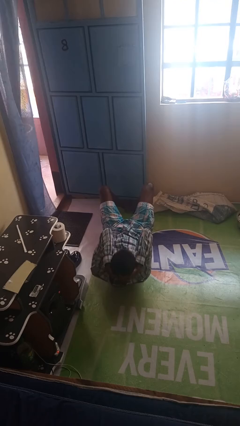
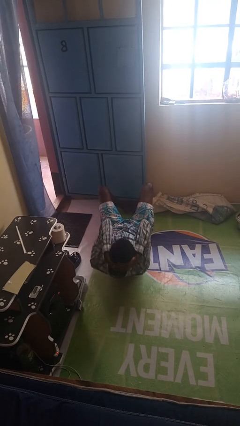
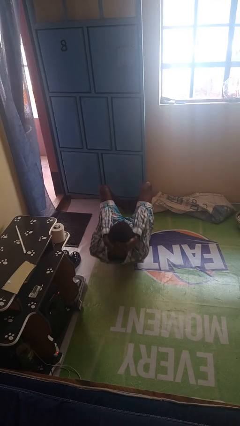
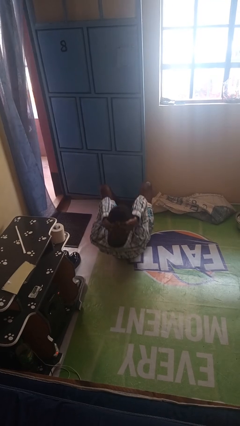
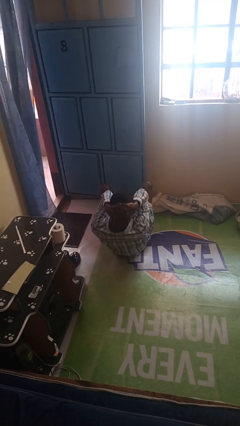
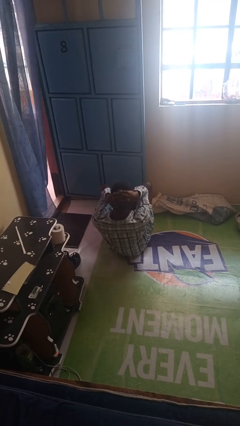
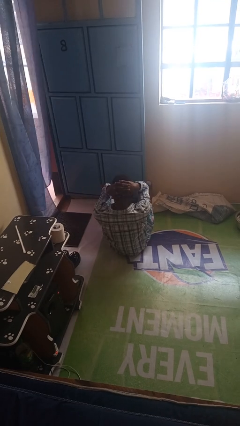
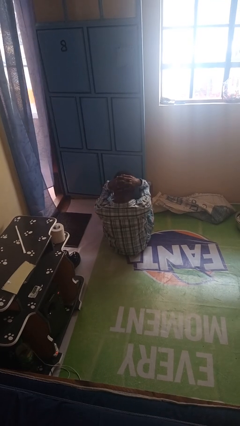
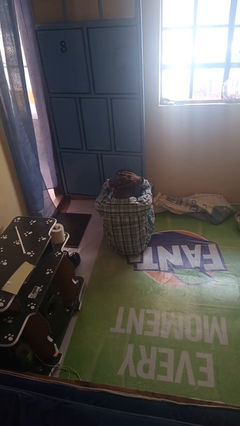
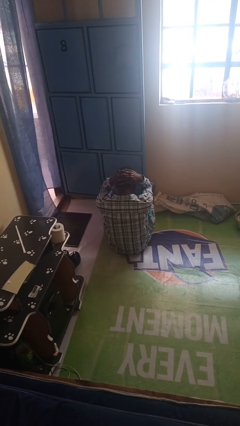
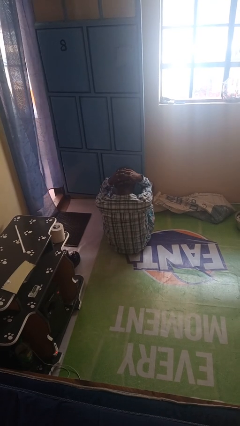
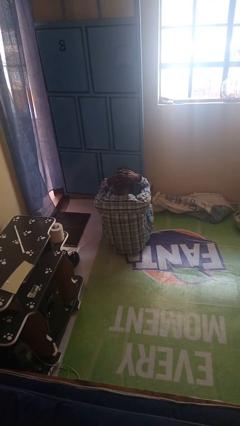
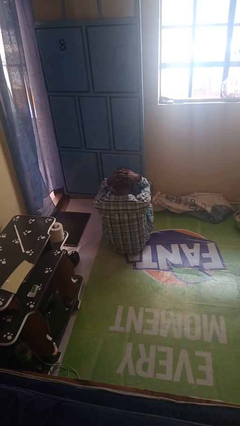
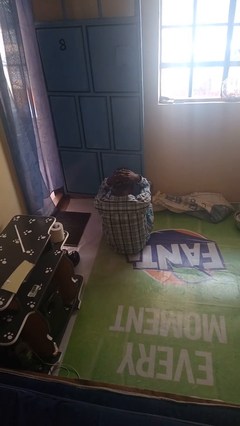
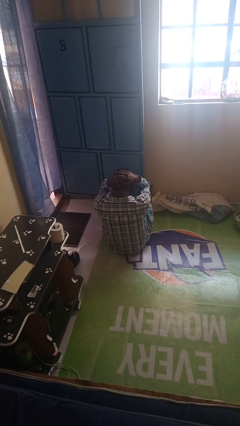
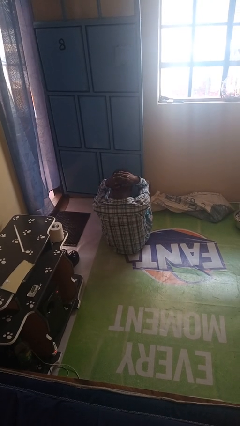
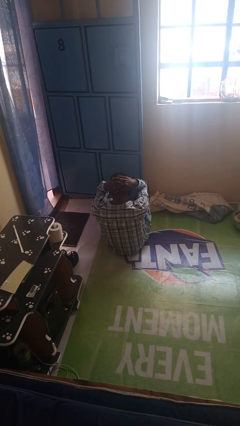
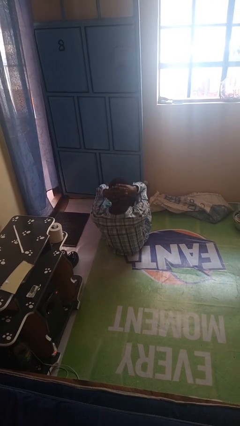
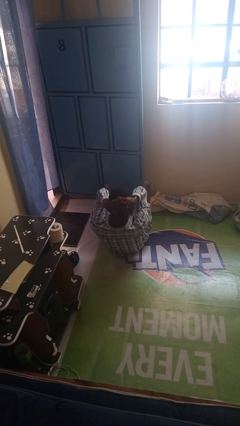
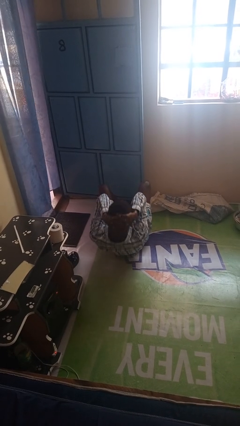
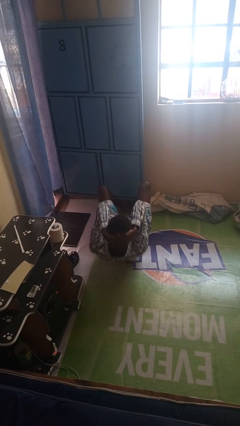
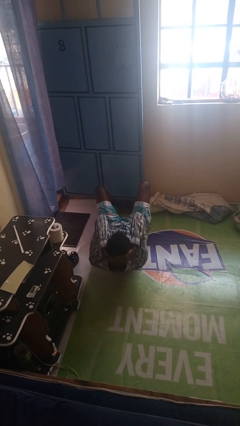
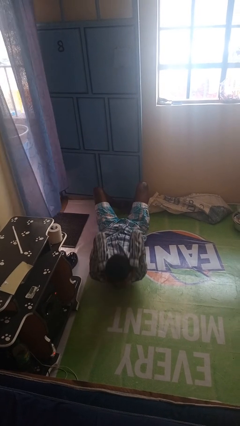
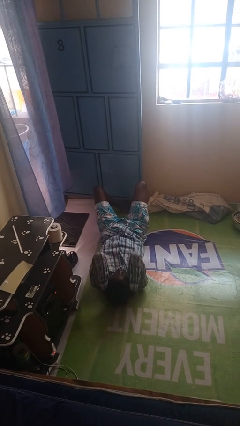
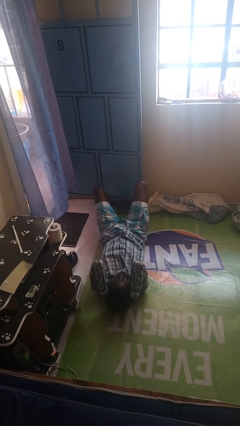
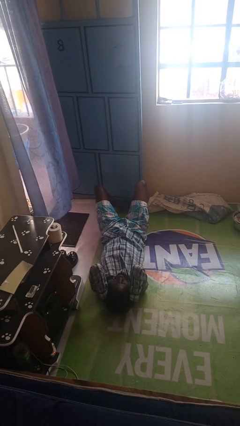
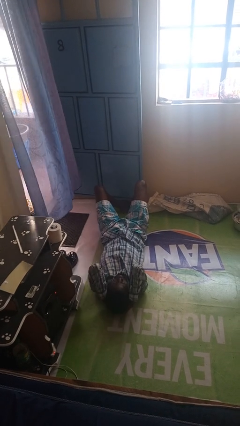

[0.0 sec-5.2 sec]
person exercises with situp

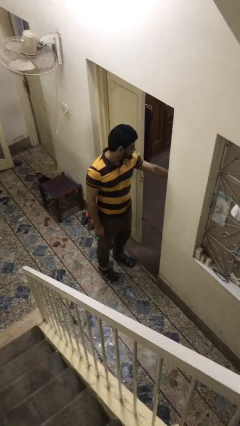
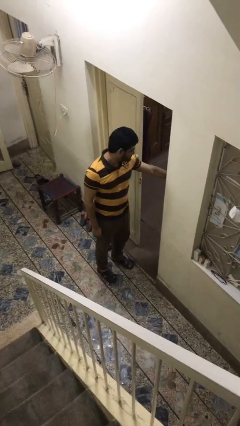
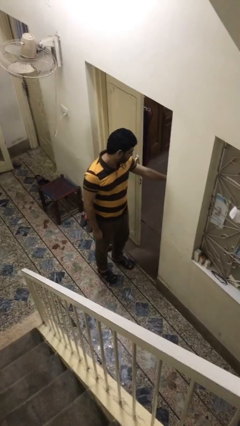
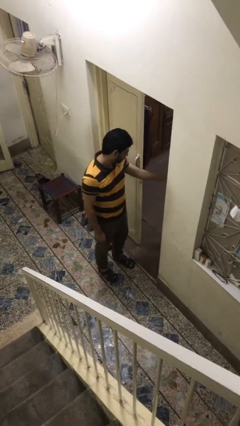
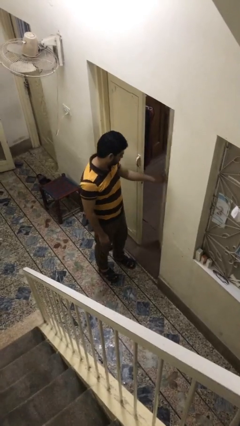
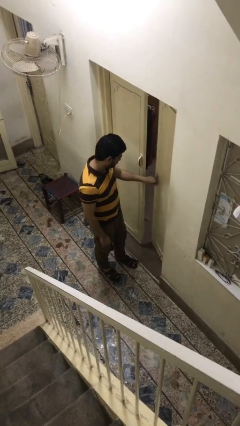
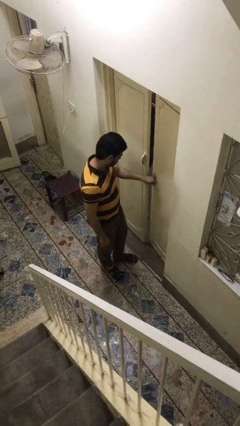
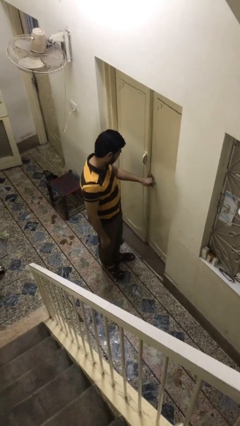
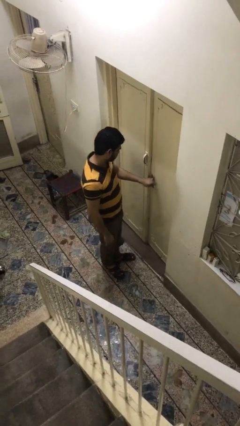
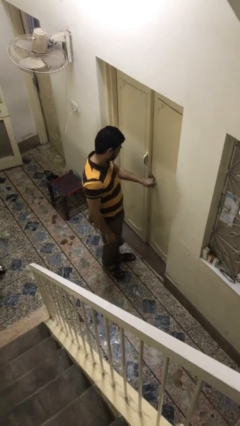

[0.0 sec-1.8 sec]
person closes facility door

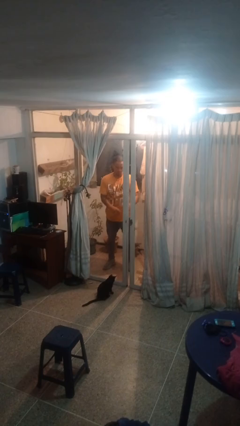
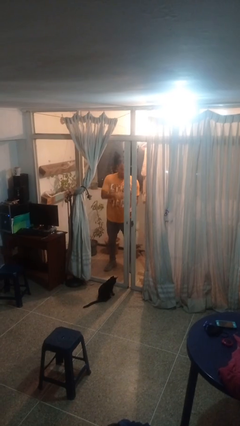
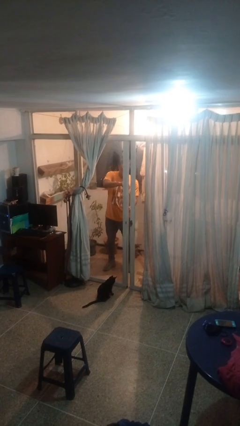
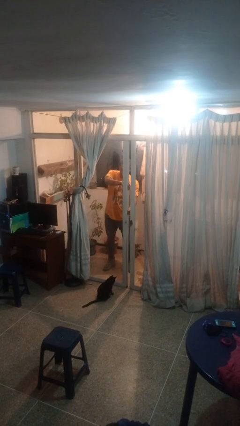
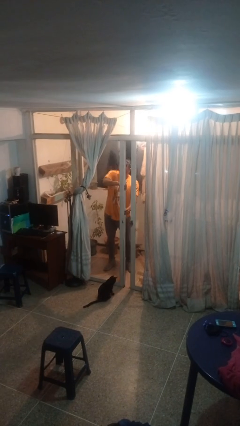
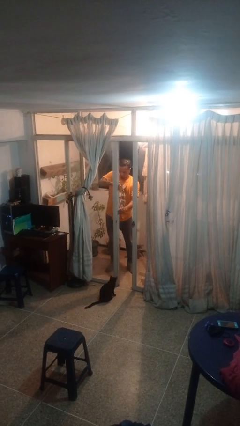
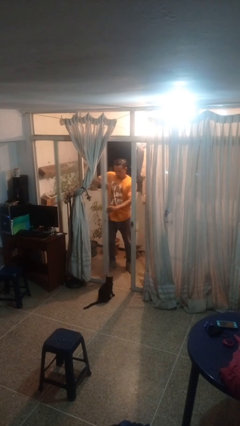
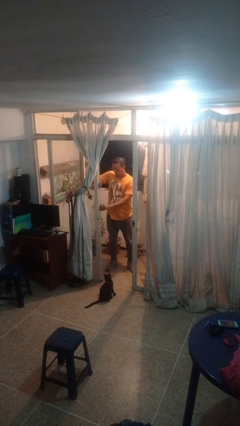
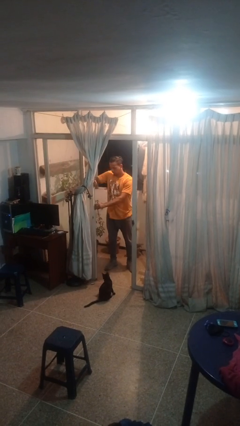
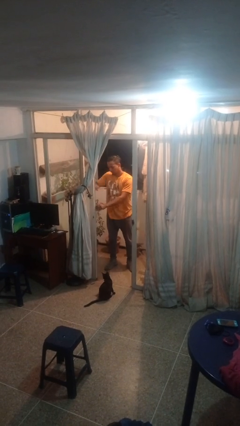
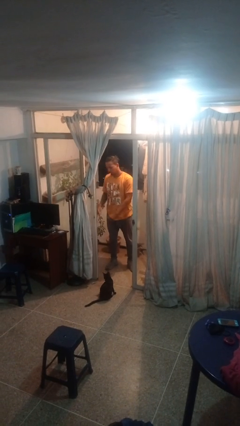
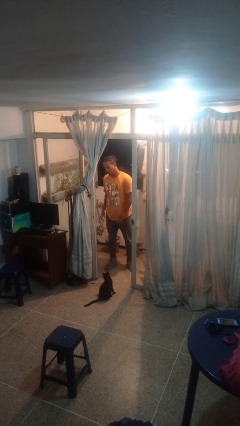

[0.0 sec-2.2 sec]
person opens sliding door

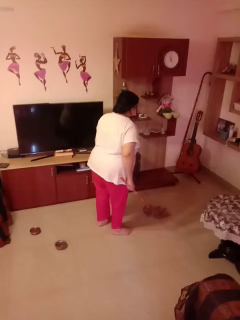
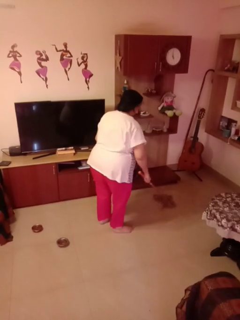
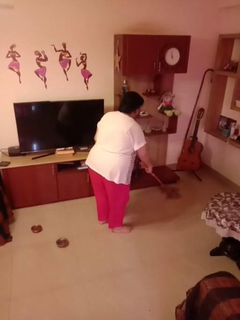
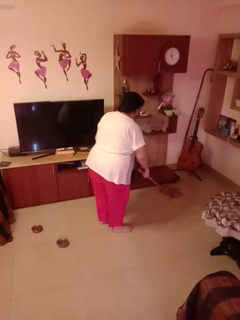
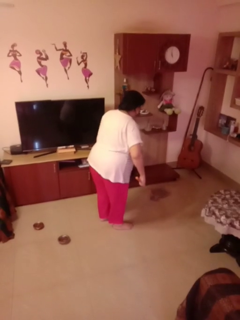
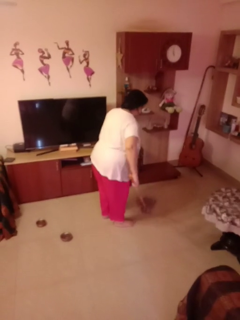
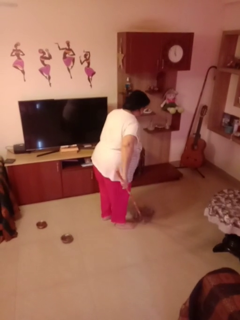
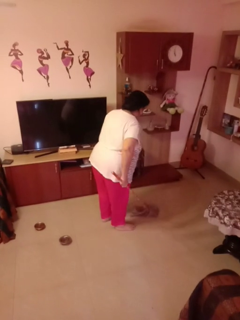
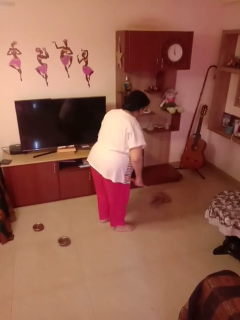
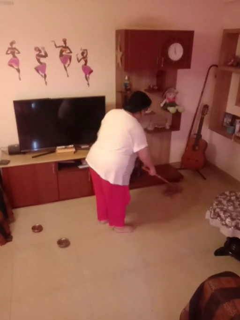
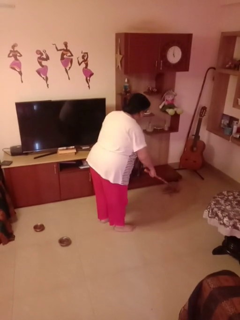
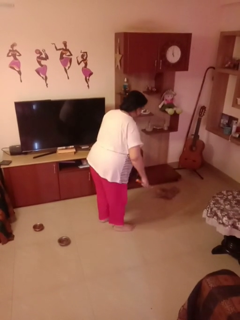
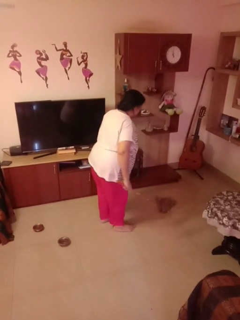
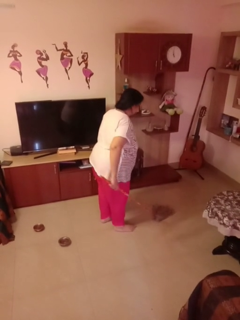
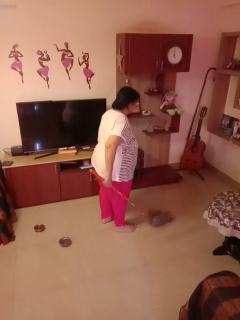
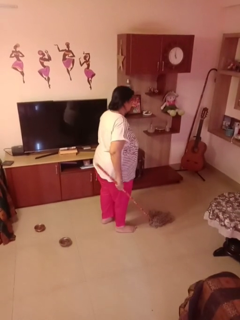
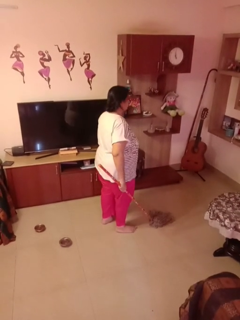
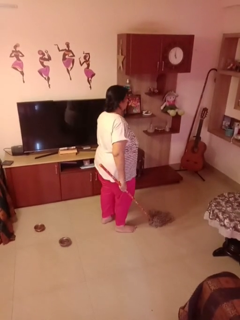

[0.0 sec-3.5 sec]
person mops

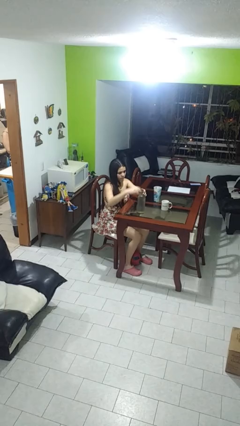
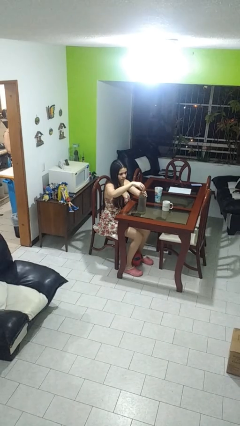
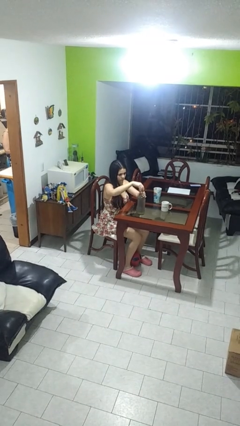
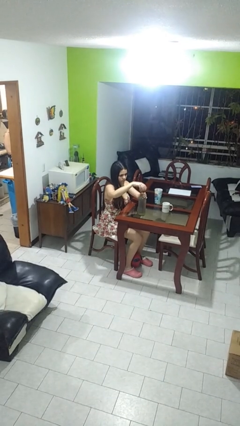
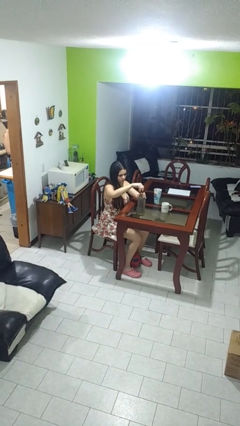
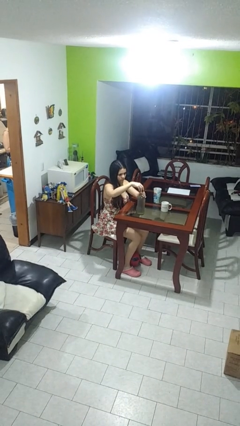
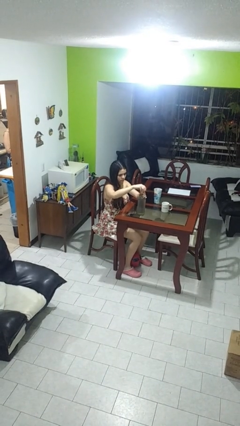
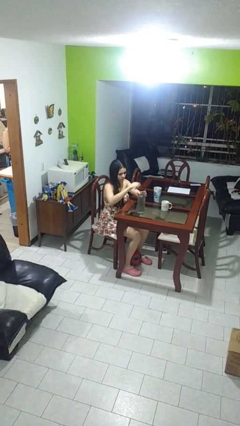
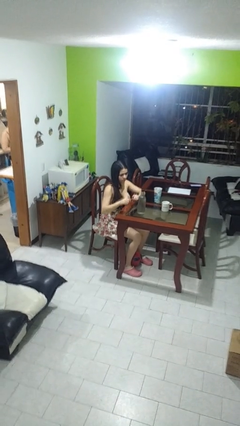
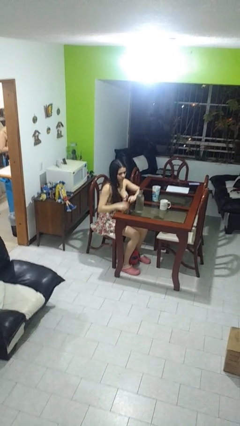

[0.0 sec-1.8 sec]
person screws lid to bottle

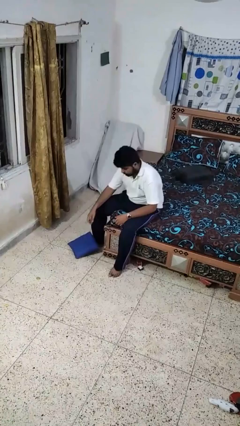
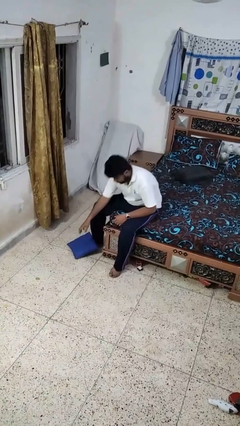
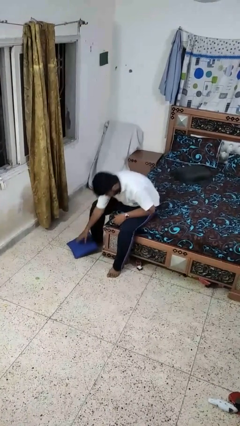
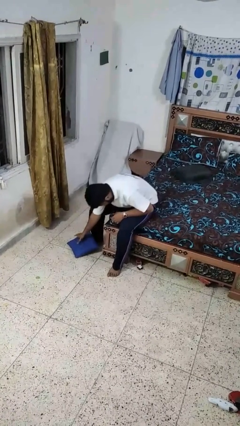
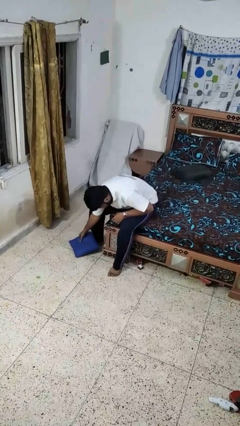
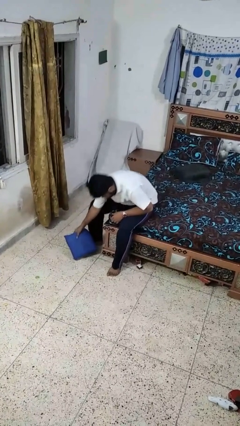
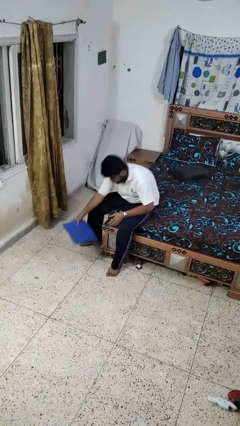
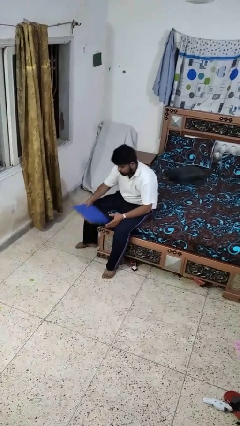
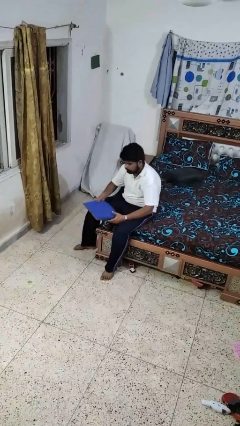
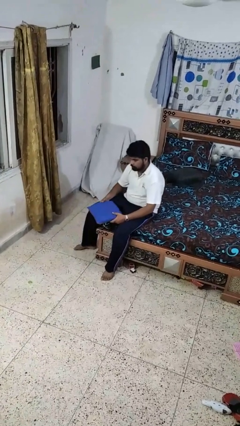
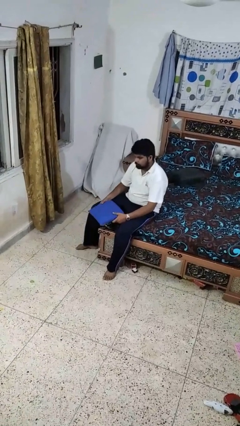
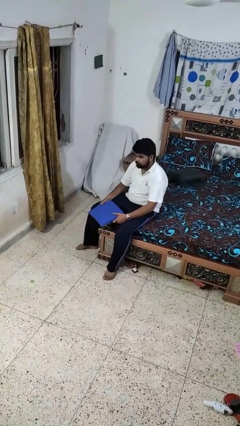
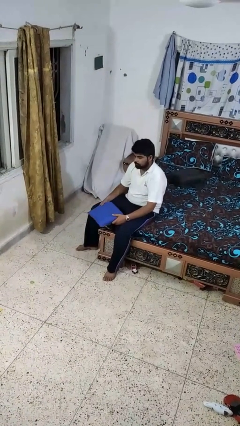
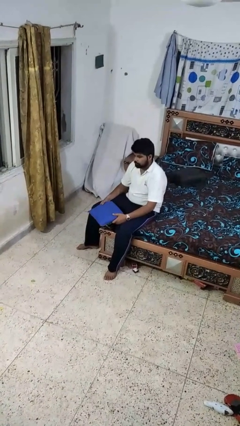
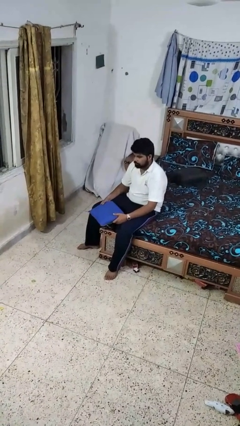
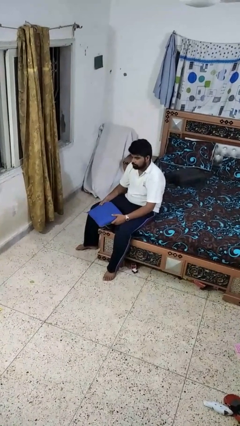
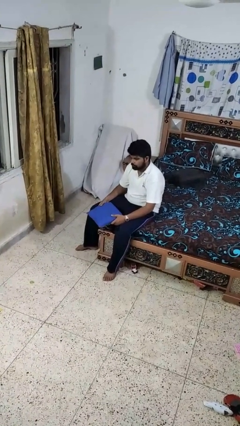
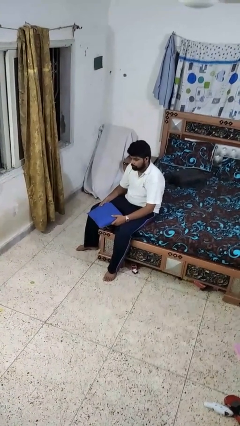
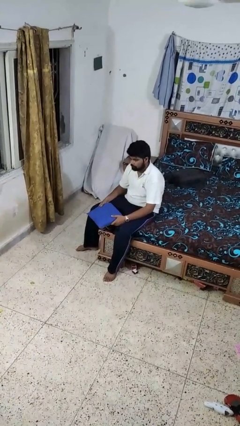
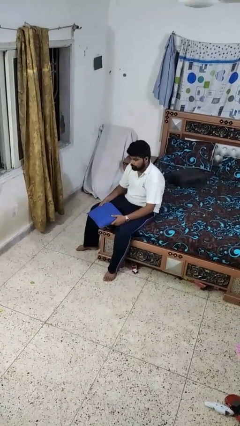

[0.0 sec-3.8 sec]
person picks up object from floor
